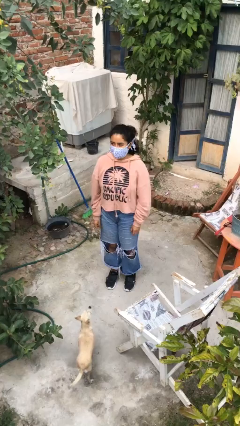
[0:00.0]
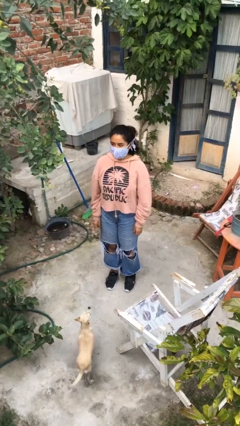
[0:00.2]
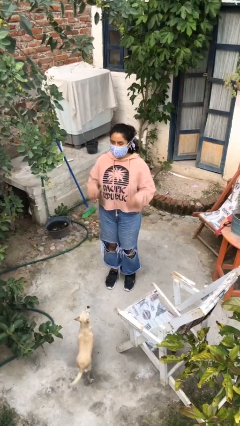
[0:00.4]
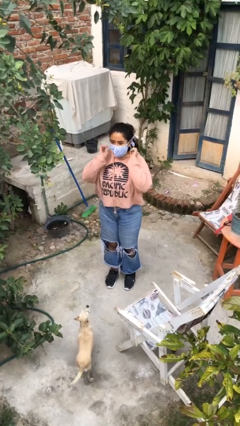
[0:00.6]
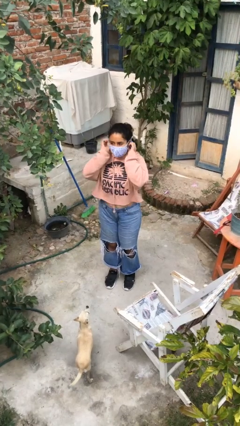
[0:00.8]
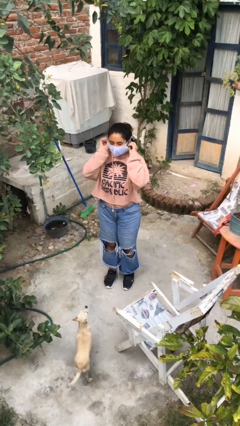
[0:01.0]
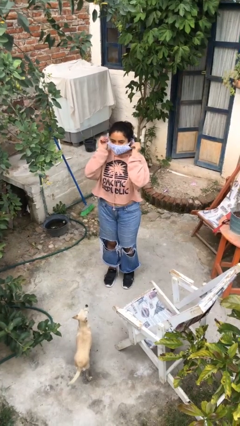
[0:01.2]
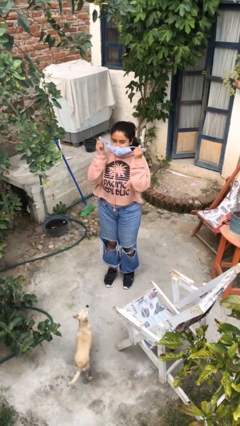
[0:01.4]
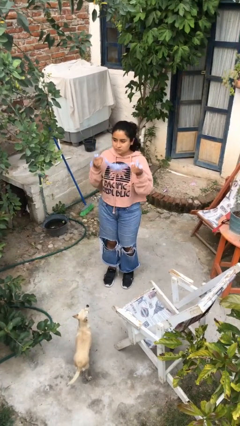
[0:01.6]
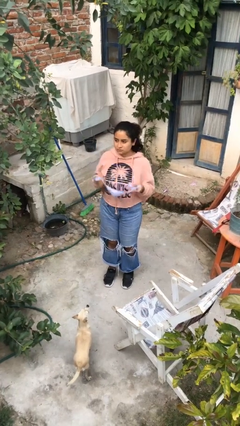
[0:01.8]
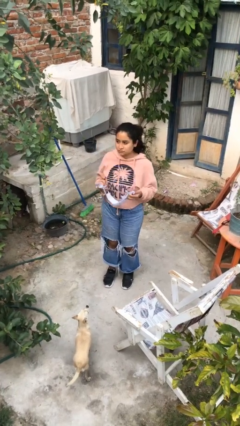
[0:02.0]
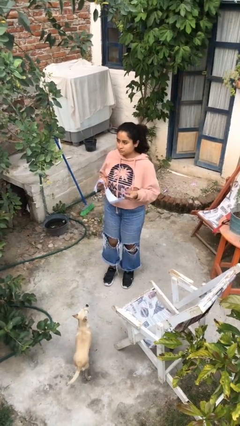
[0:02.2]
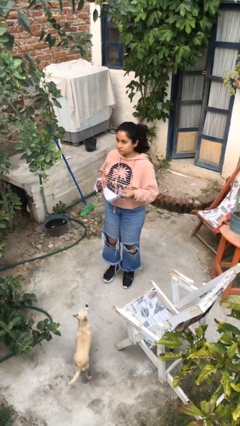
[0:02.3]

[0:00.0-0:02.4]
person takes off facemask

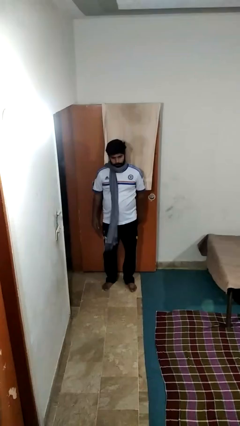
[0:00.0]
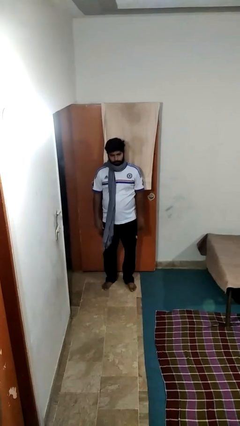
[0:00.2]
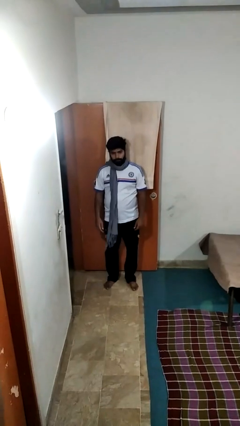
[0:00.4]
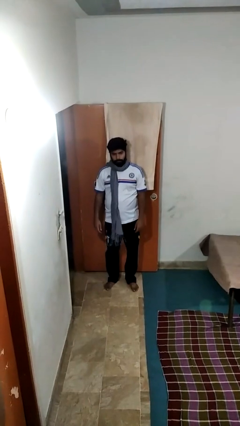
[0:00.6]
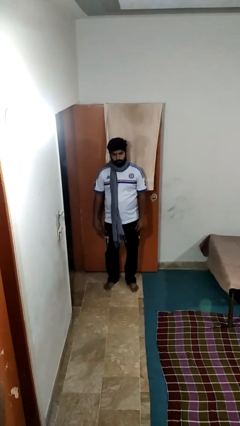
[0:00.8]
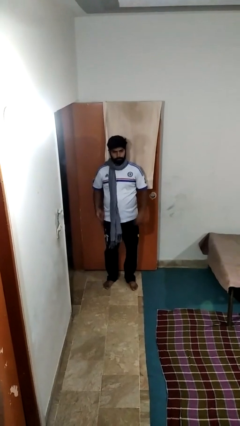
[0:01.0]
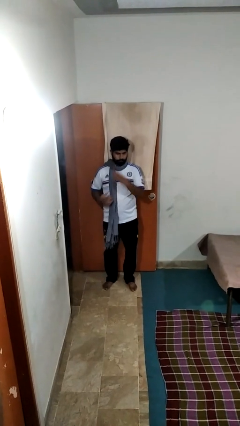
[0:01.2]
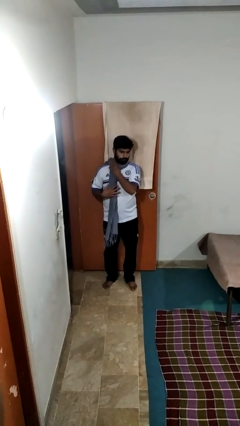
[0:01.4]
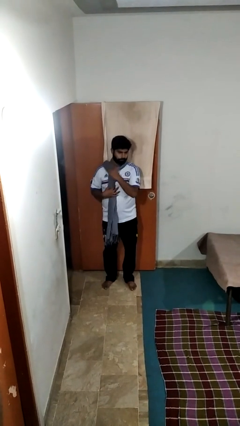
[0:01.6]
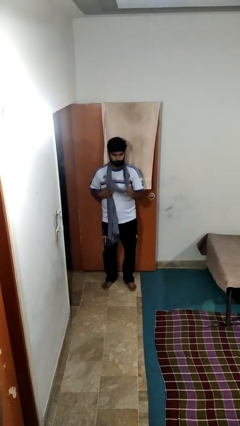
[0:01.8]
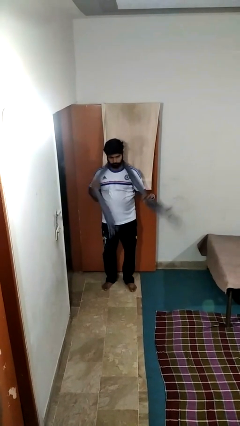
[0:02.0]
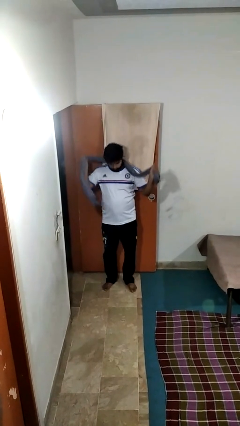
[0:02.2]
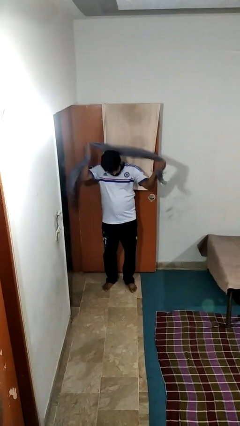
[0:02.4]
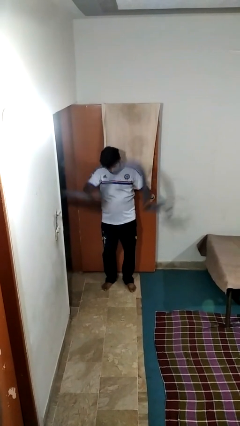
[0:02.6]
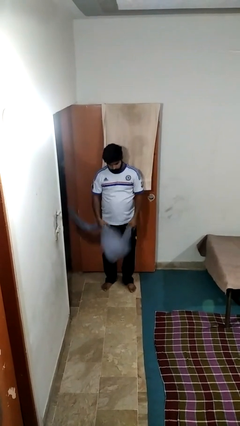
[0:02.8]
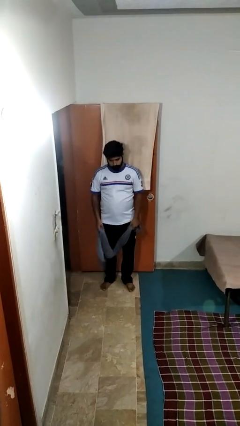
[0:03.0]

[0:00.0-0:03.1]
person takes off scarf

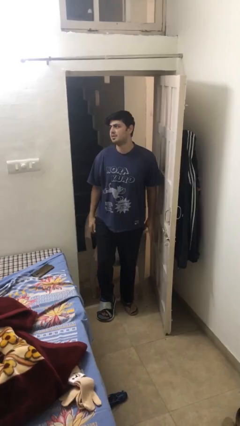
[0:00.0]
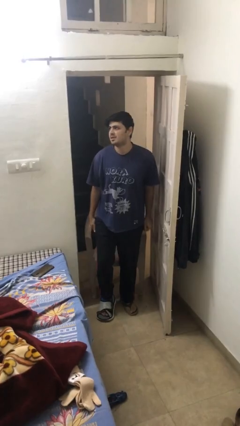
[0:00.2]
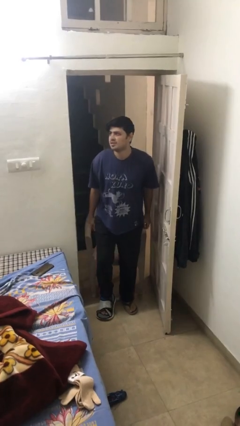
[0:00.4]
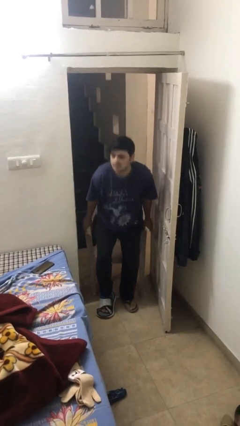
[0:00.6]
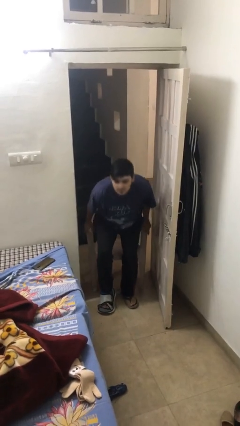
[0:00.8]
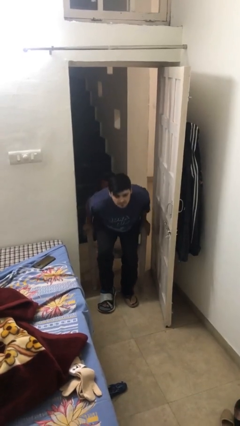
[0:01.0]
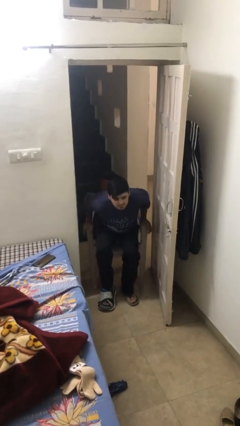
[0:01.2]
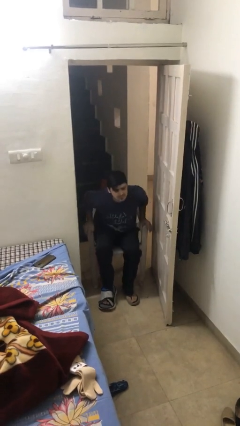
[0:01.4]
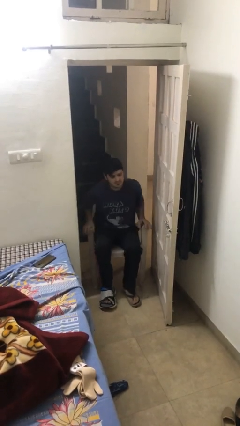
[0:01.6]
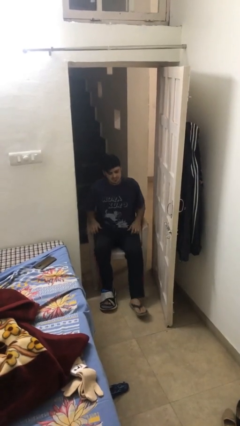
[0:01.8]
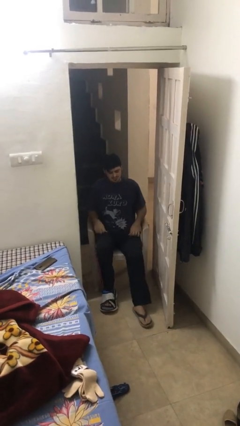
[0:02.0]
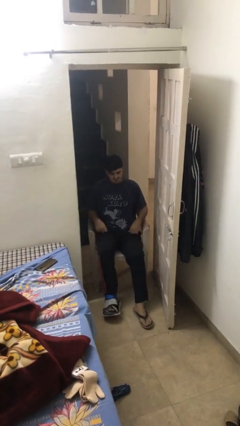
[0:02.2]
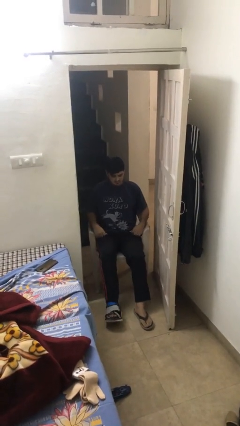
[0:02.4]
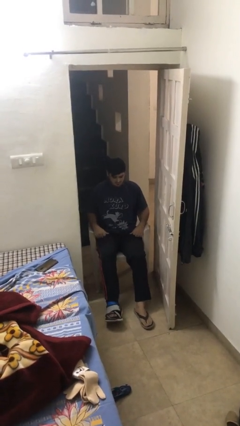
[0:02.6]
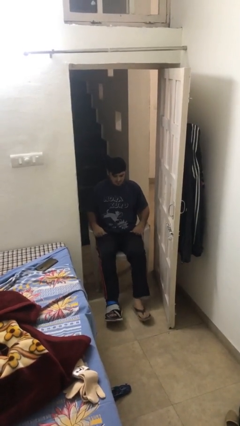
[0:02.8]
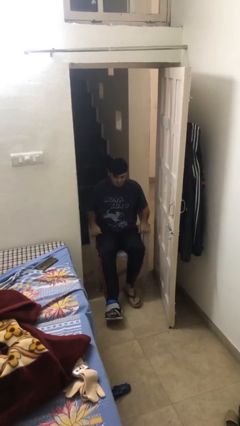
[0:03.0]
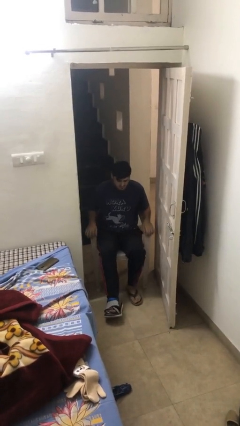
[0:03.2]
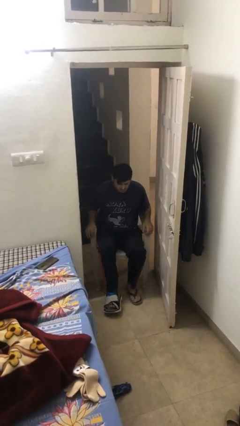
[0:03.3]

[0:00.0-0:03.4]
person sits down

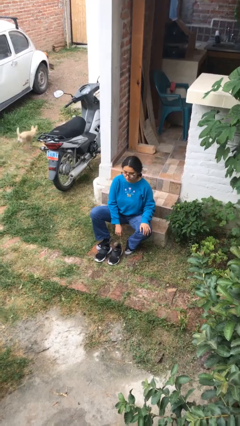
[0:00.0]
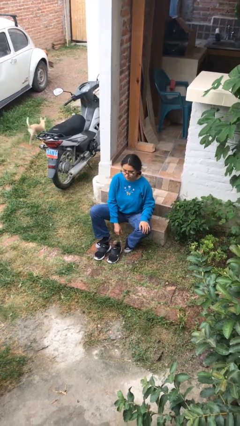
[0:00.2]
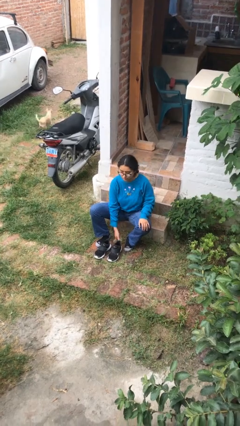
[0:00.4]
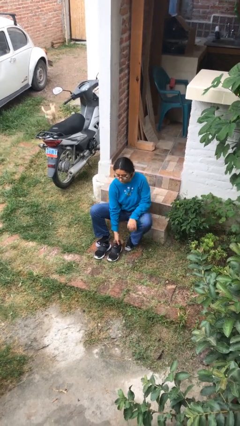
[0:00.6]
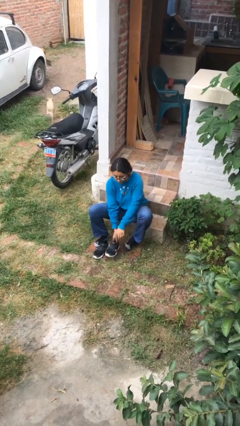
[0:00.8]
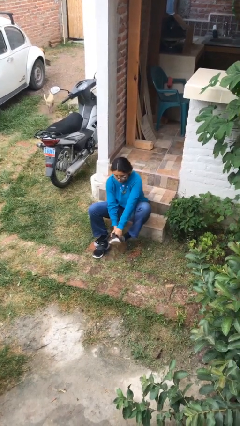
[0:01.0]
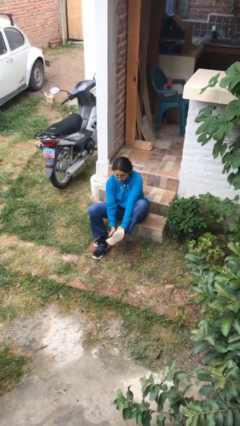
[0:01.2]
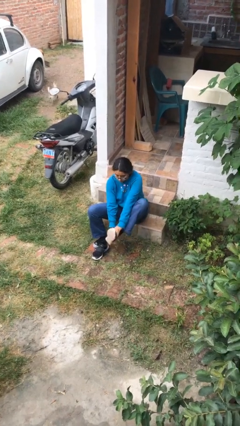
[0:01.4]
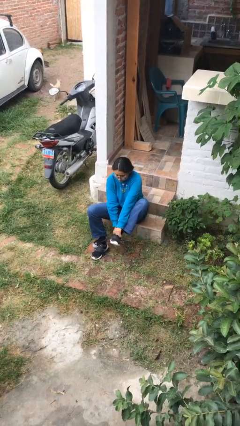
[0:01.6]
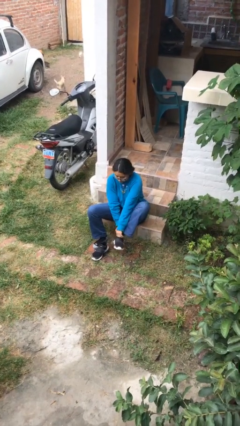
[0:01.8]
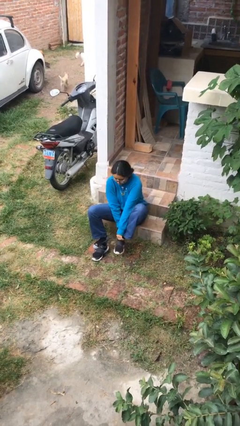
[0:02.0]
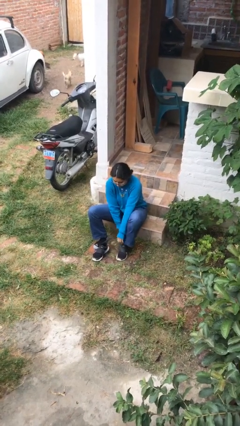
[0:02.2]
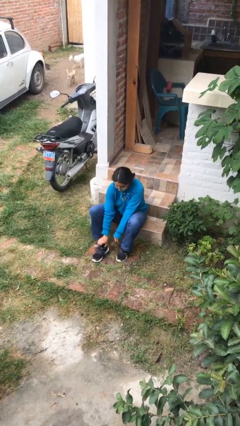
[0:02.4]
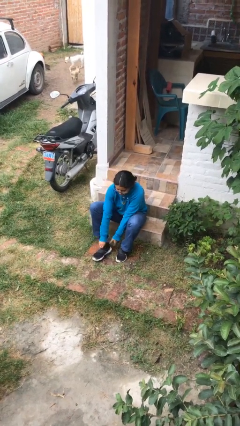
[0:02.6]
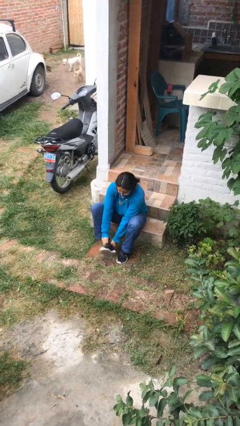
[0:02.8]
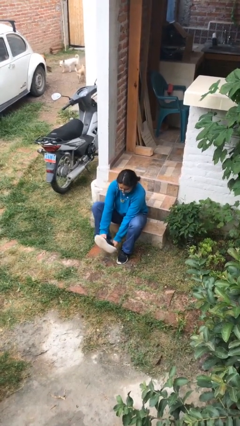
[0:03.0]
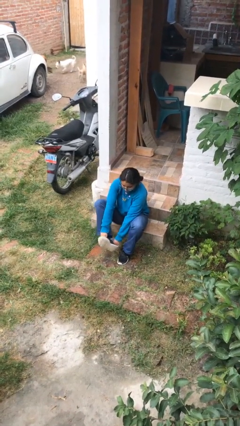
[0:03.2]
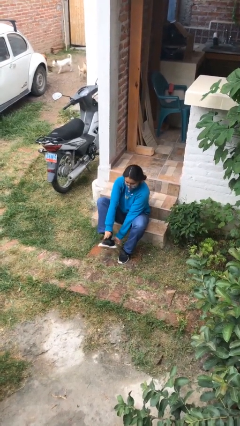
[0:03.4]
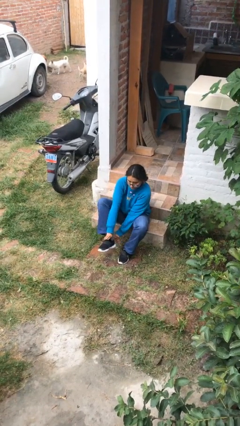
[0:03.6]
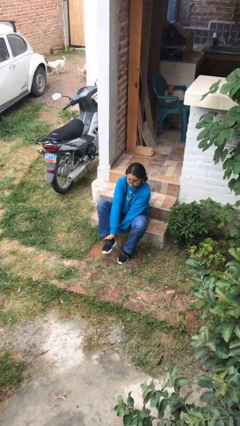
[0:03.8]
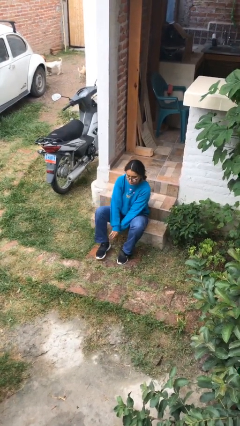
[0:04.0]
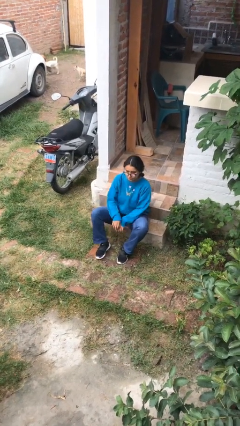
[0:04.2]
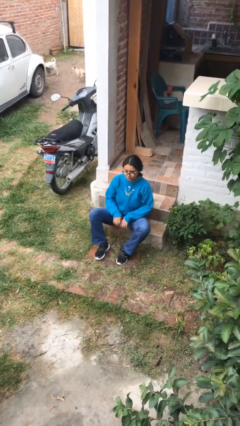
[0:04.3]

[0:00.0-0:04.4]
person puts on shoes

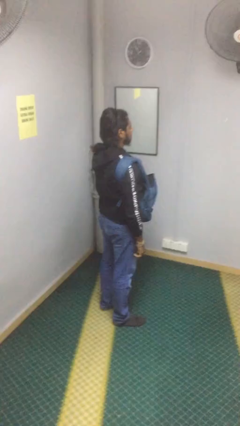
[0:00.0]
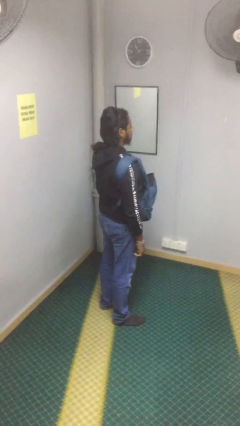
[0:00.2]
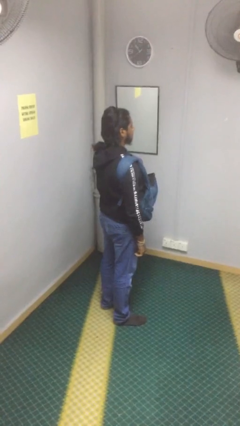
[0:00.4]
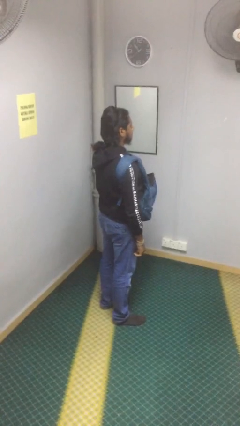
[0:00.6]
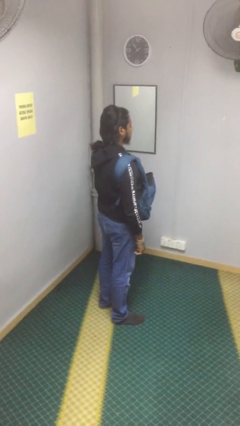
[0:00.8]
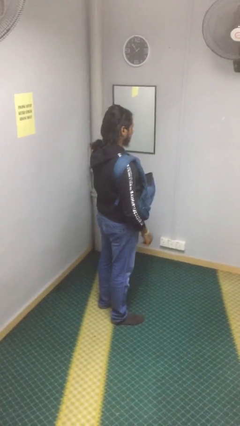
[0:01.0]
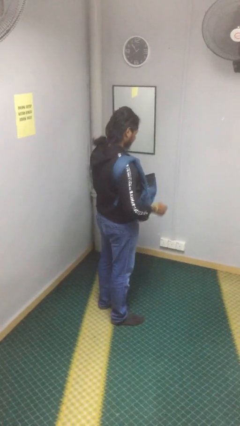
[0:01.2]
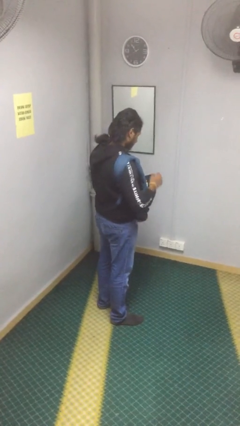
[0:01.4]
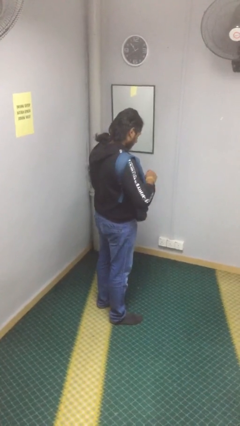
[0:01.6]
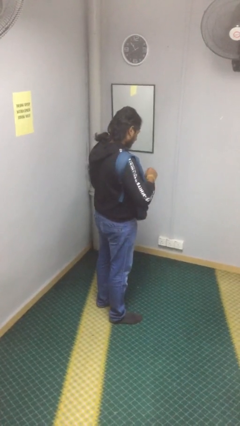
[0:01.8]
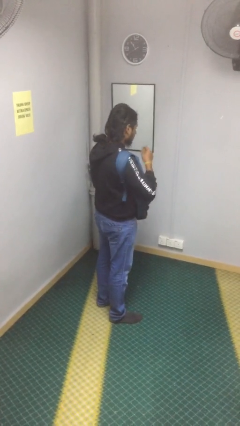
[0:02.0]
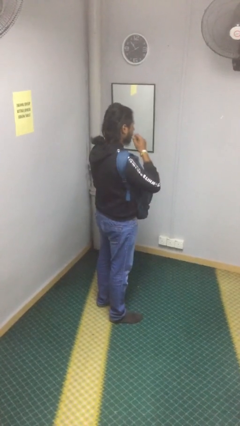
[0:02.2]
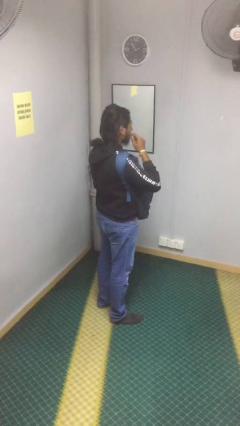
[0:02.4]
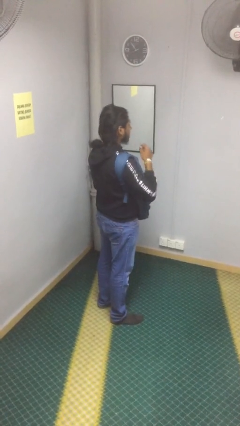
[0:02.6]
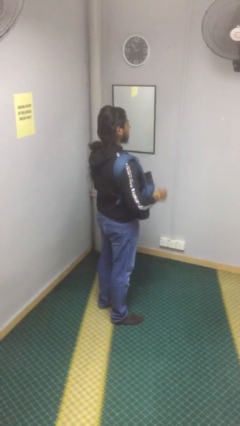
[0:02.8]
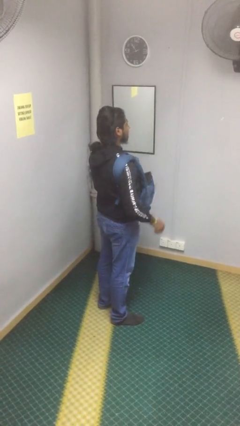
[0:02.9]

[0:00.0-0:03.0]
person eats snack from bag

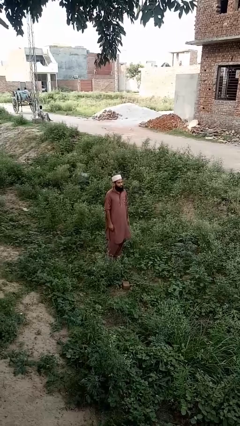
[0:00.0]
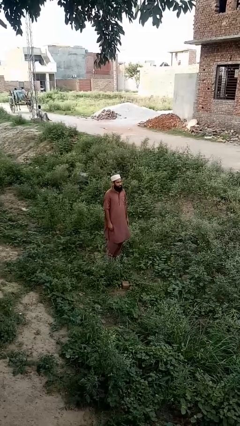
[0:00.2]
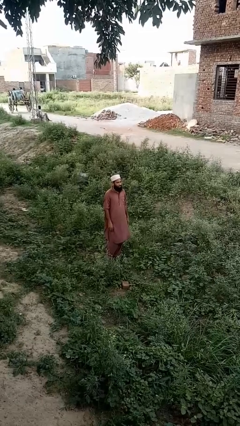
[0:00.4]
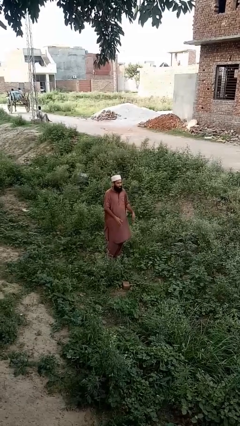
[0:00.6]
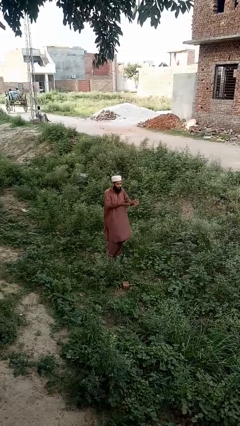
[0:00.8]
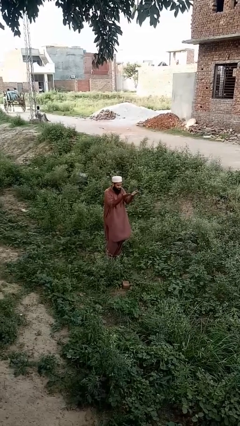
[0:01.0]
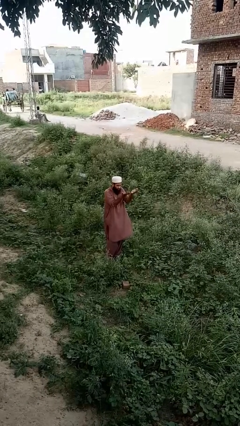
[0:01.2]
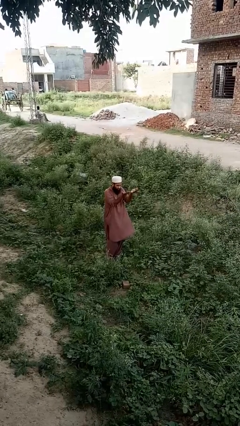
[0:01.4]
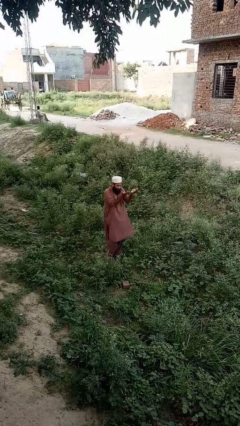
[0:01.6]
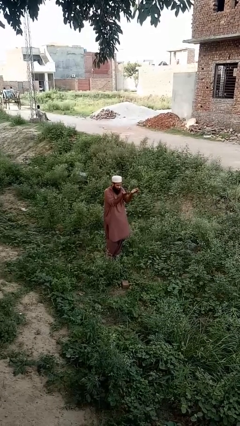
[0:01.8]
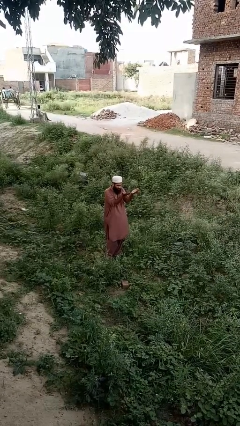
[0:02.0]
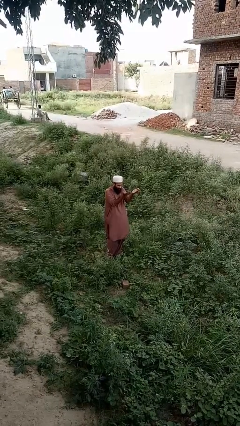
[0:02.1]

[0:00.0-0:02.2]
person prays
